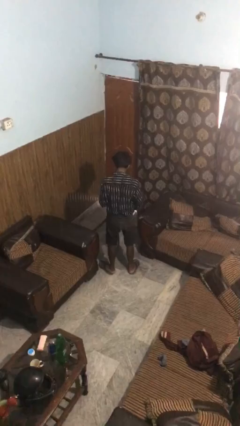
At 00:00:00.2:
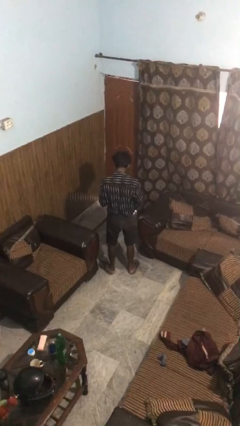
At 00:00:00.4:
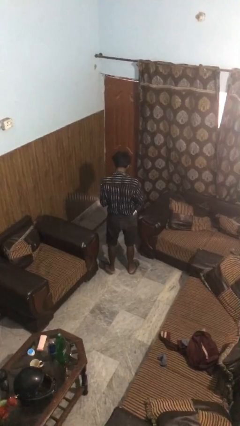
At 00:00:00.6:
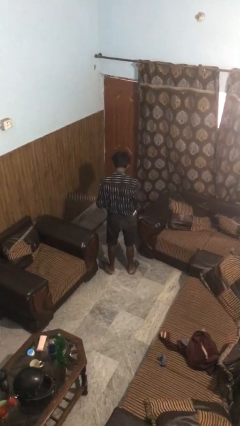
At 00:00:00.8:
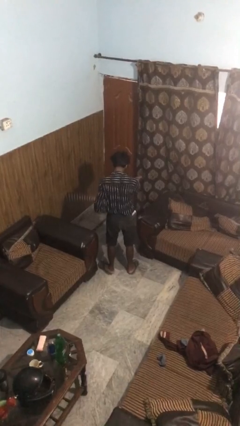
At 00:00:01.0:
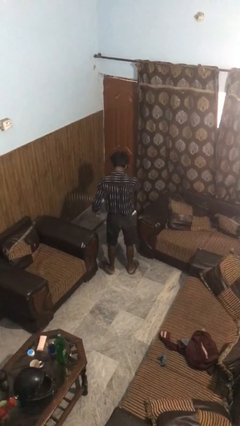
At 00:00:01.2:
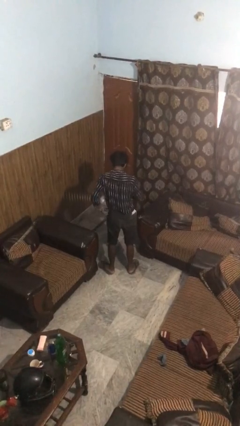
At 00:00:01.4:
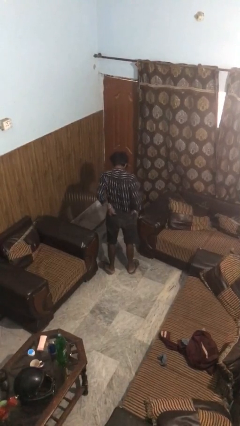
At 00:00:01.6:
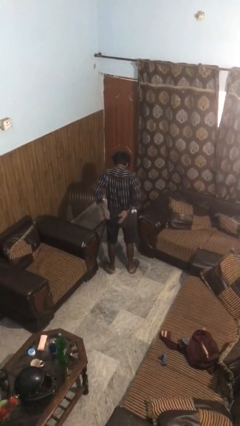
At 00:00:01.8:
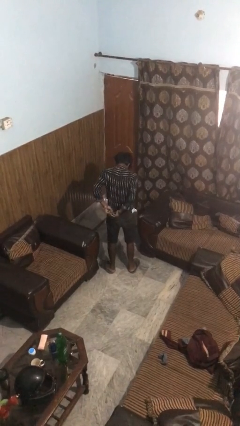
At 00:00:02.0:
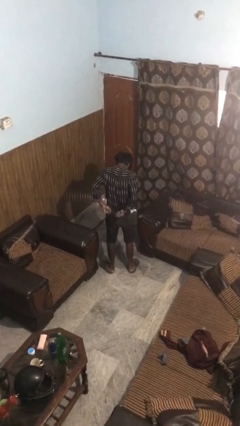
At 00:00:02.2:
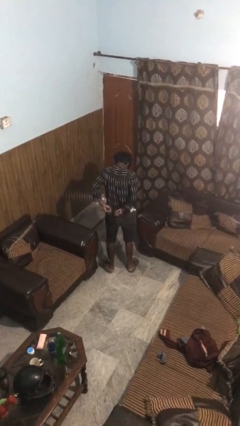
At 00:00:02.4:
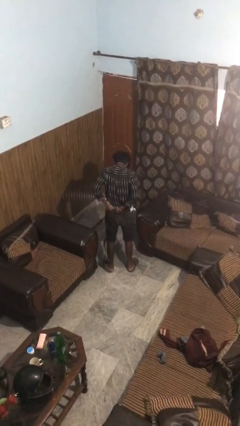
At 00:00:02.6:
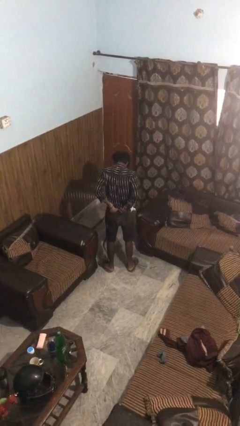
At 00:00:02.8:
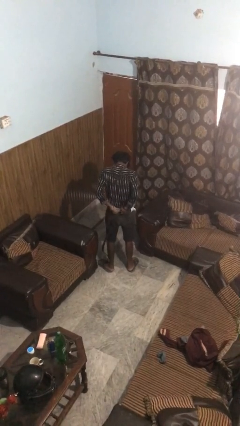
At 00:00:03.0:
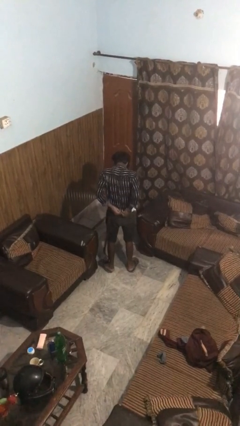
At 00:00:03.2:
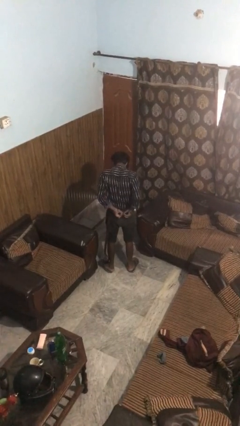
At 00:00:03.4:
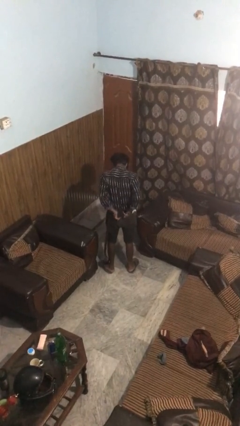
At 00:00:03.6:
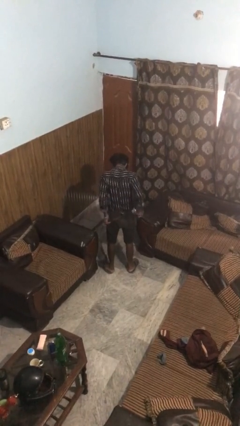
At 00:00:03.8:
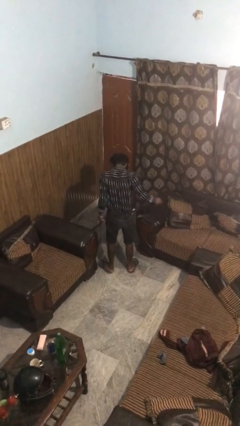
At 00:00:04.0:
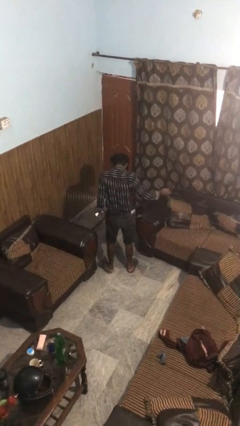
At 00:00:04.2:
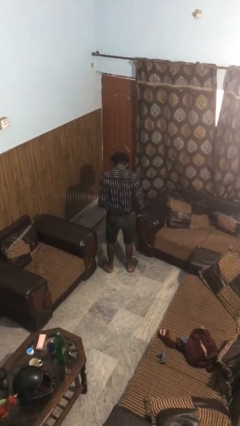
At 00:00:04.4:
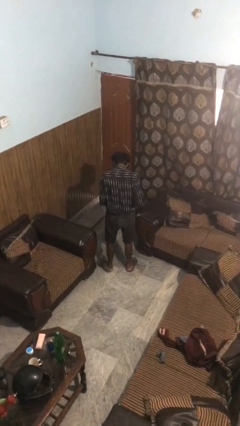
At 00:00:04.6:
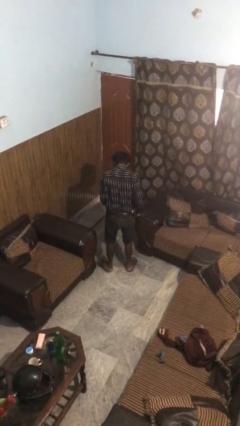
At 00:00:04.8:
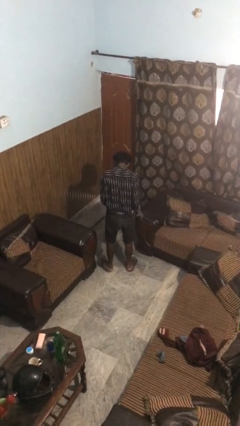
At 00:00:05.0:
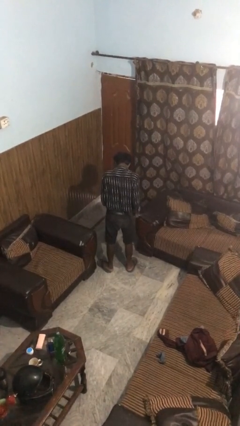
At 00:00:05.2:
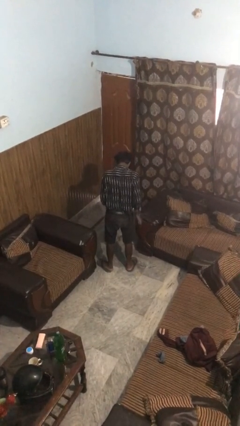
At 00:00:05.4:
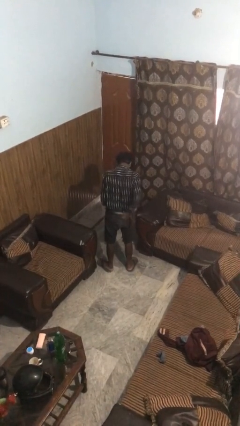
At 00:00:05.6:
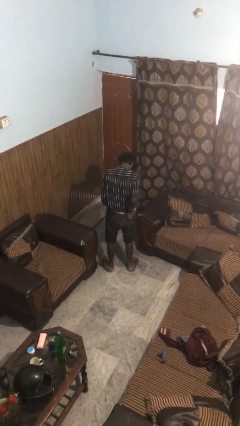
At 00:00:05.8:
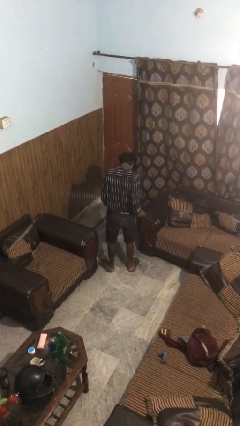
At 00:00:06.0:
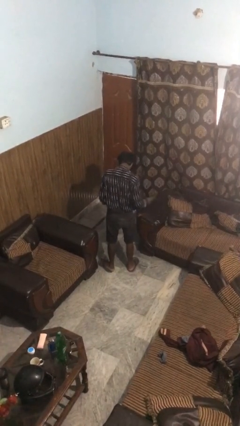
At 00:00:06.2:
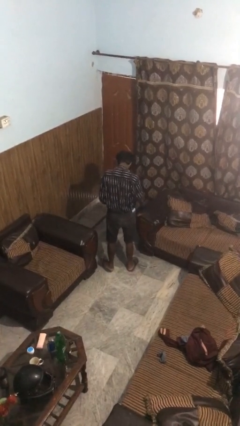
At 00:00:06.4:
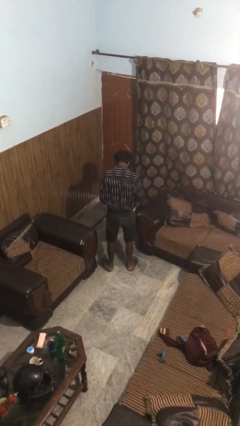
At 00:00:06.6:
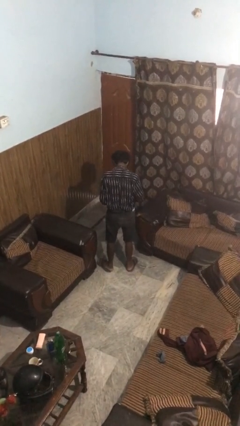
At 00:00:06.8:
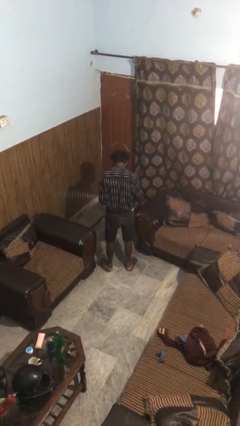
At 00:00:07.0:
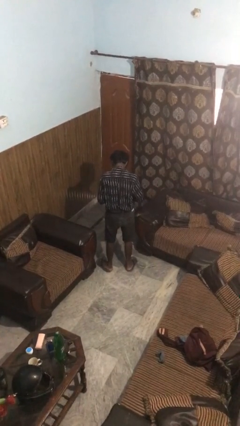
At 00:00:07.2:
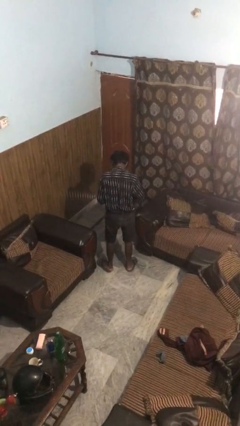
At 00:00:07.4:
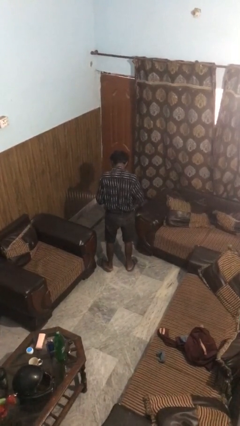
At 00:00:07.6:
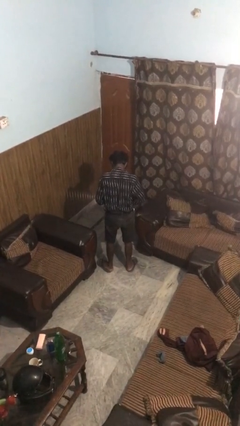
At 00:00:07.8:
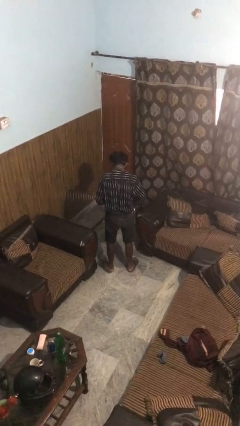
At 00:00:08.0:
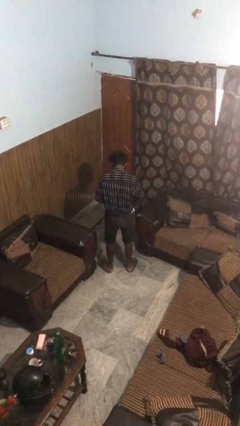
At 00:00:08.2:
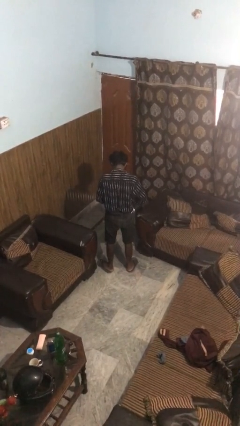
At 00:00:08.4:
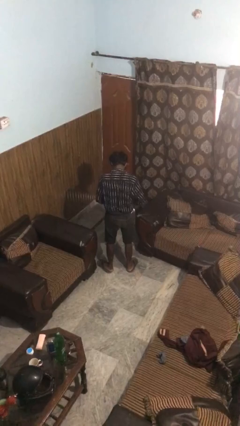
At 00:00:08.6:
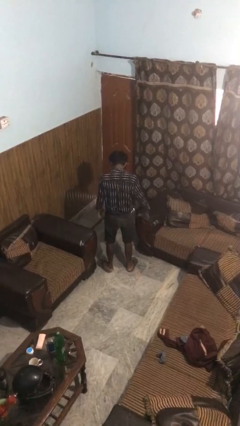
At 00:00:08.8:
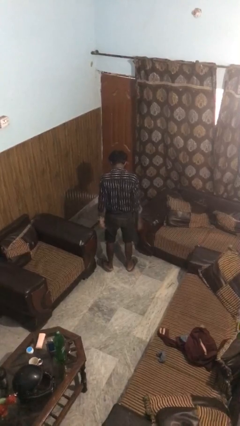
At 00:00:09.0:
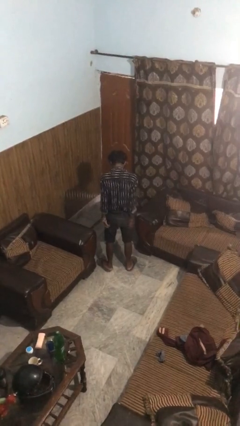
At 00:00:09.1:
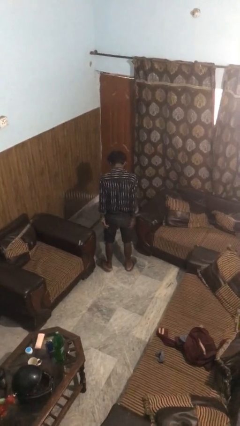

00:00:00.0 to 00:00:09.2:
person puts on belt

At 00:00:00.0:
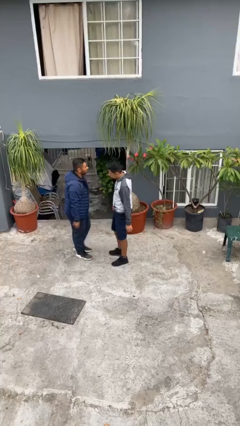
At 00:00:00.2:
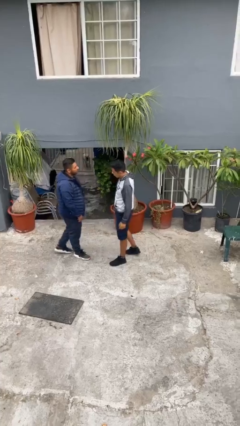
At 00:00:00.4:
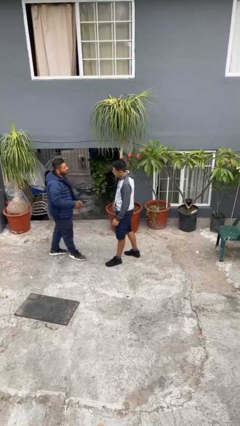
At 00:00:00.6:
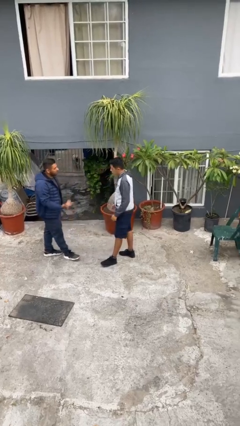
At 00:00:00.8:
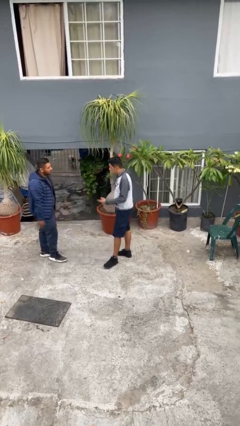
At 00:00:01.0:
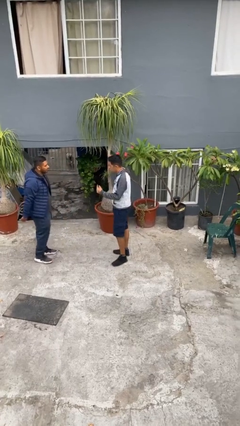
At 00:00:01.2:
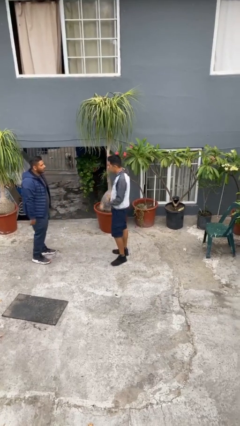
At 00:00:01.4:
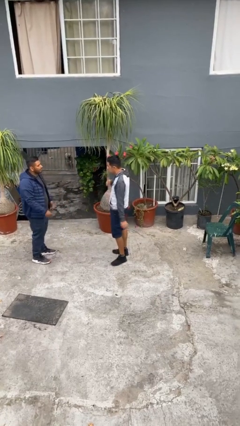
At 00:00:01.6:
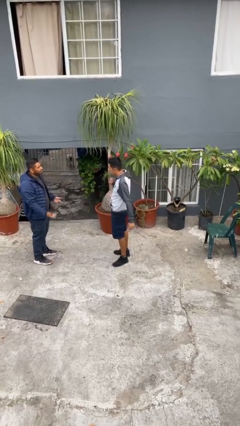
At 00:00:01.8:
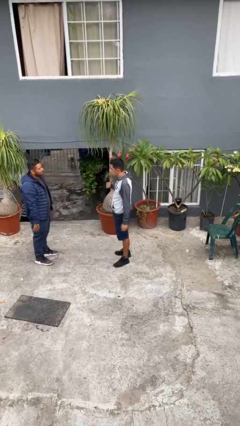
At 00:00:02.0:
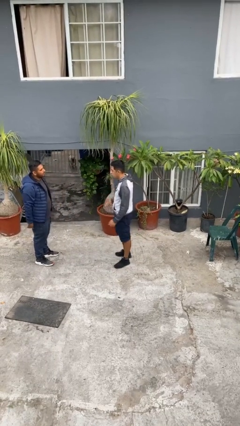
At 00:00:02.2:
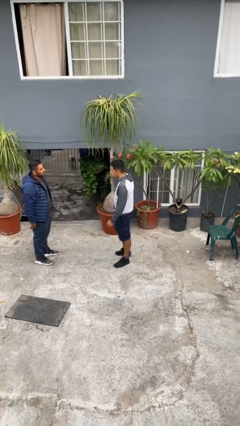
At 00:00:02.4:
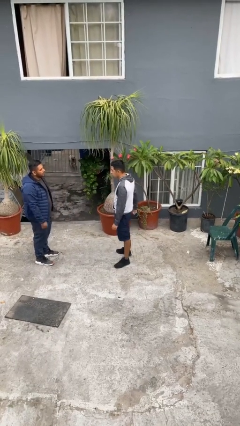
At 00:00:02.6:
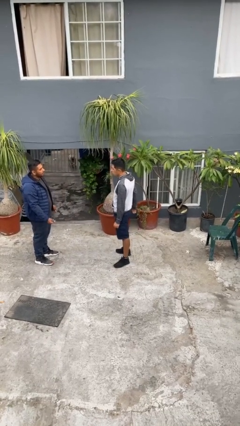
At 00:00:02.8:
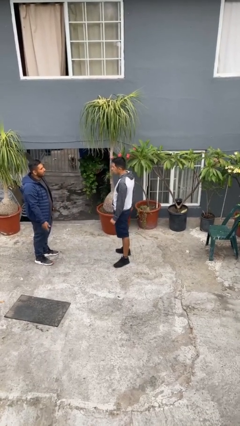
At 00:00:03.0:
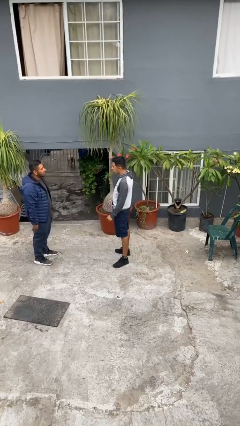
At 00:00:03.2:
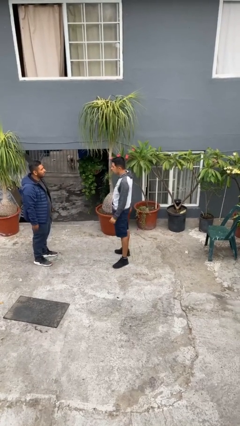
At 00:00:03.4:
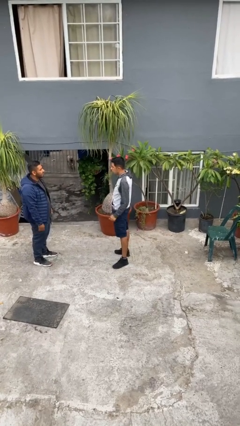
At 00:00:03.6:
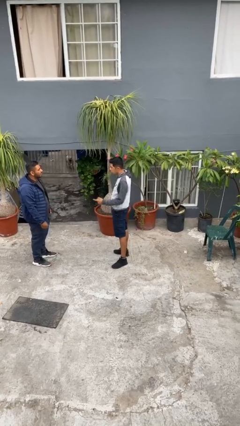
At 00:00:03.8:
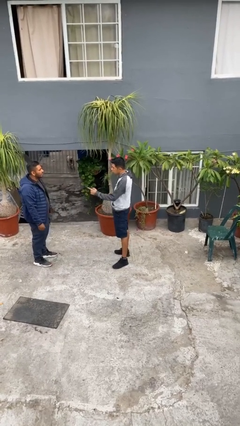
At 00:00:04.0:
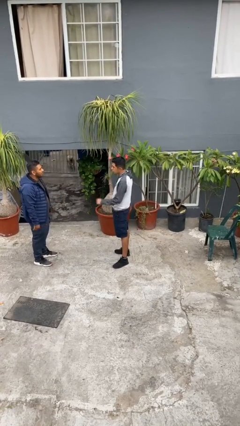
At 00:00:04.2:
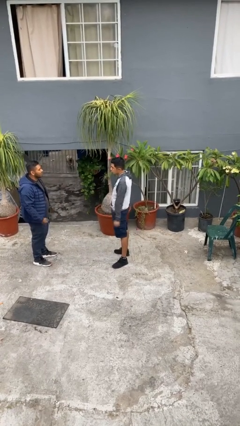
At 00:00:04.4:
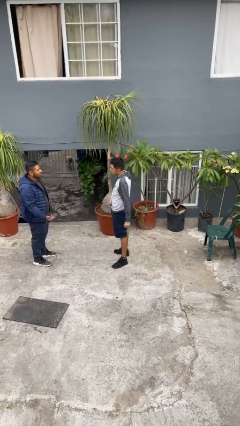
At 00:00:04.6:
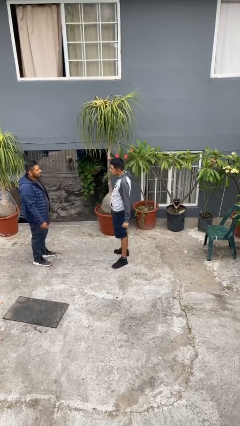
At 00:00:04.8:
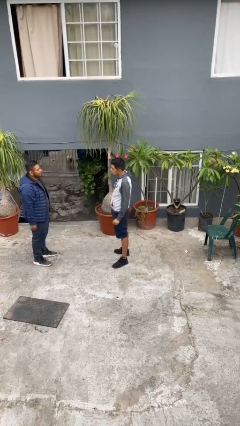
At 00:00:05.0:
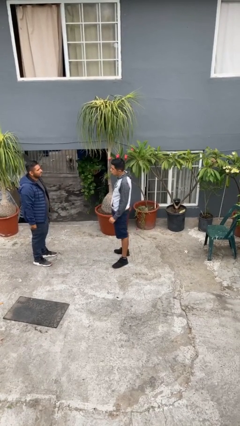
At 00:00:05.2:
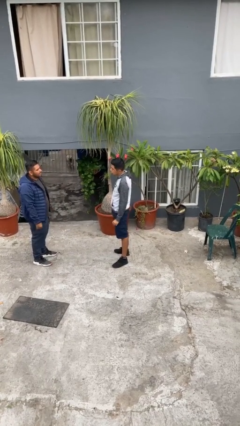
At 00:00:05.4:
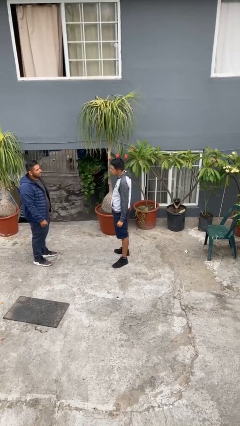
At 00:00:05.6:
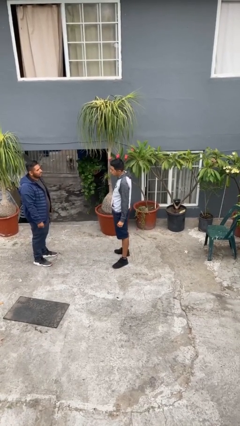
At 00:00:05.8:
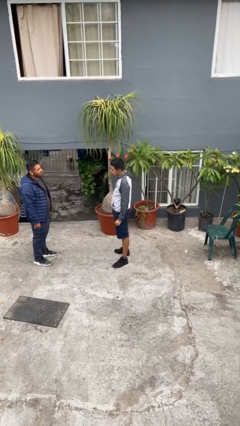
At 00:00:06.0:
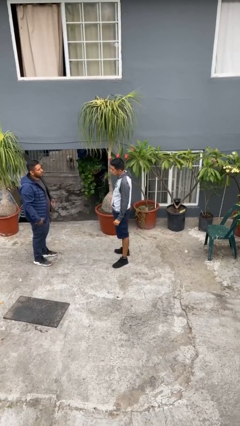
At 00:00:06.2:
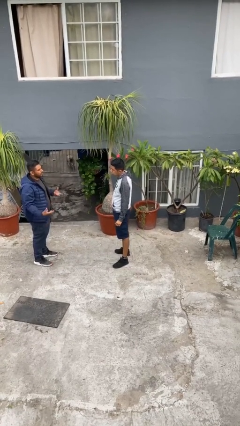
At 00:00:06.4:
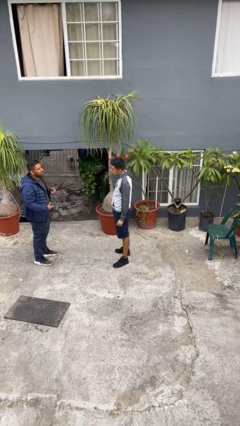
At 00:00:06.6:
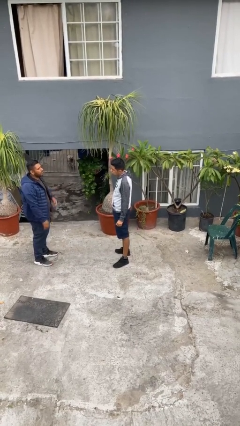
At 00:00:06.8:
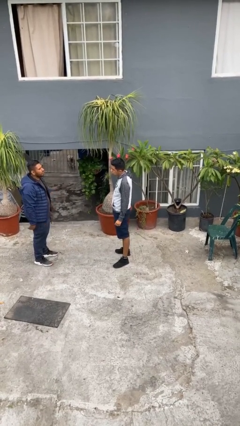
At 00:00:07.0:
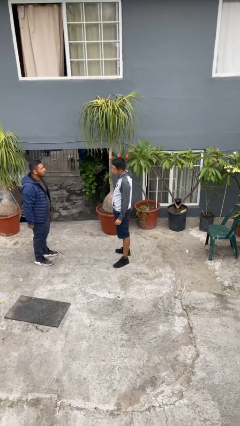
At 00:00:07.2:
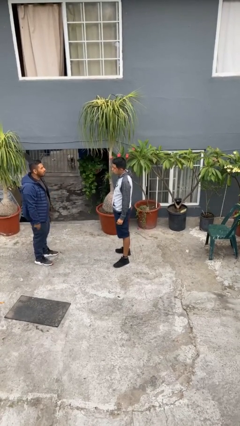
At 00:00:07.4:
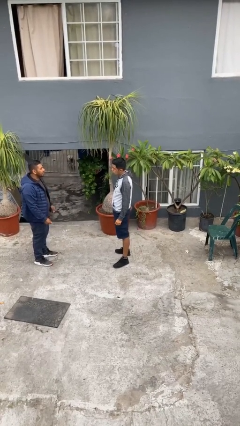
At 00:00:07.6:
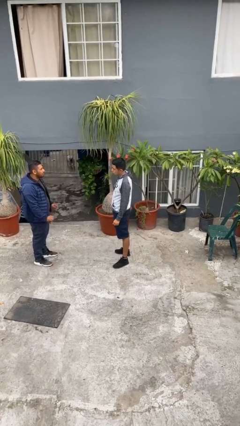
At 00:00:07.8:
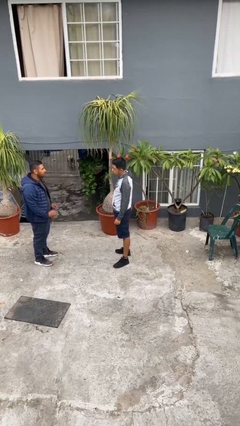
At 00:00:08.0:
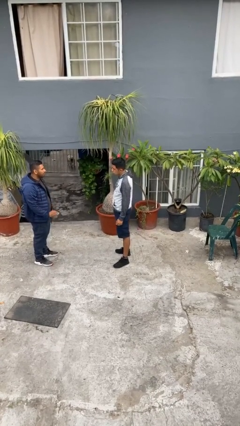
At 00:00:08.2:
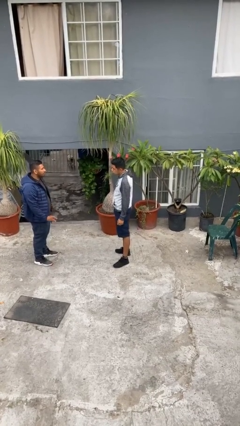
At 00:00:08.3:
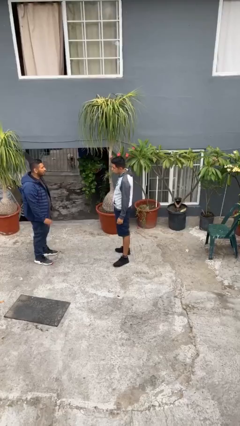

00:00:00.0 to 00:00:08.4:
person talks to person

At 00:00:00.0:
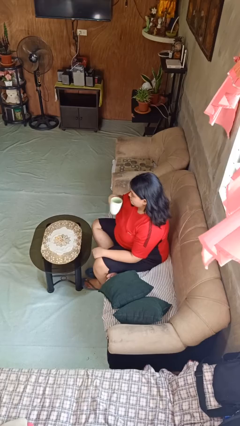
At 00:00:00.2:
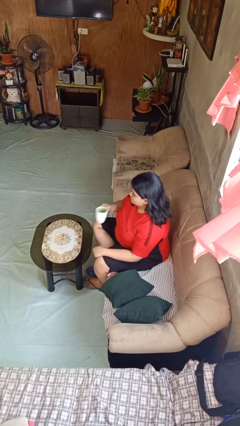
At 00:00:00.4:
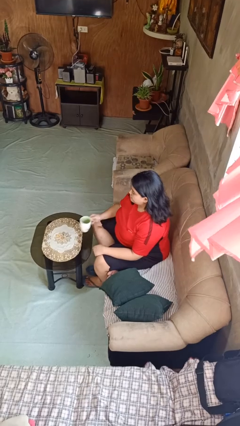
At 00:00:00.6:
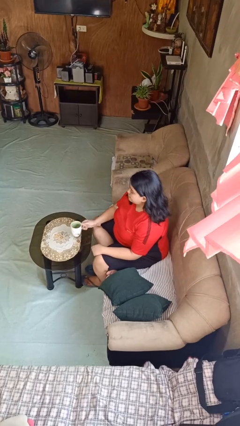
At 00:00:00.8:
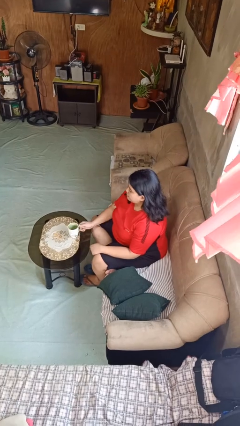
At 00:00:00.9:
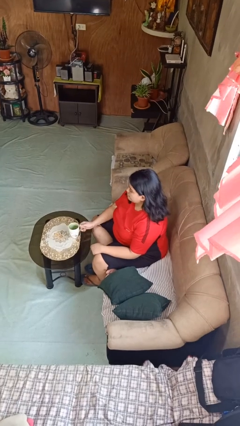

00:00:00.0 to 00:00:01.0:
person puts down object on table
